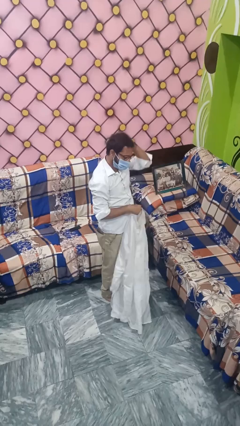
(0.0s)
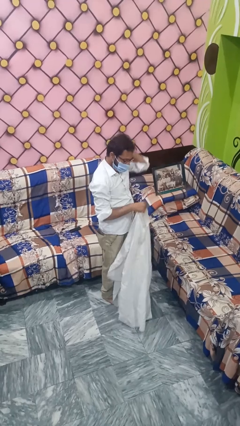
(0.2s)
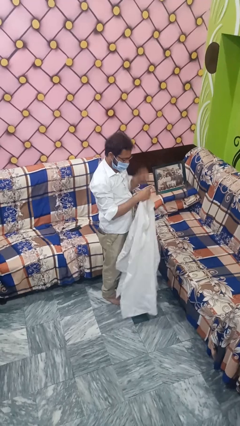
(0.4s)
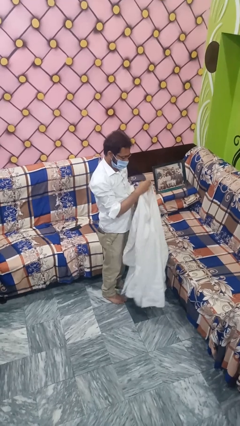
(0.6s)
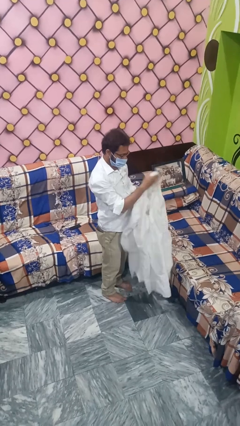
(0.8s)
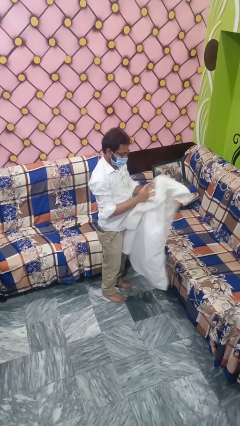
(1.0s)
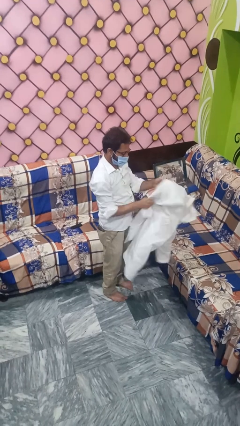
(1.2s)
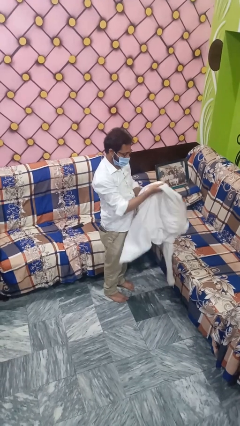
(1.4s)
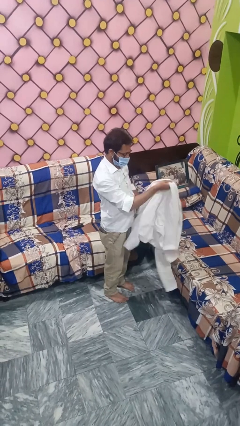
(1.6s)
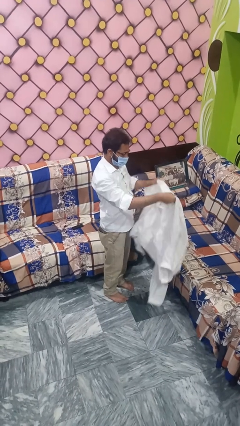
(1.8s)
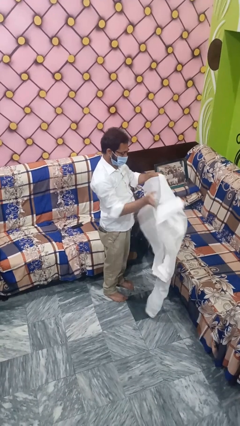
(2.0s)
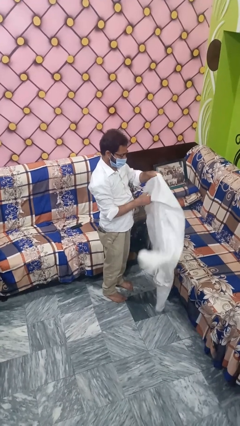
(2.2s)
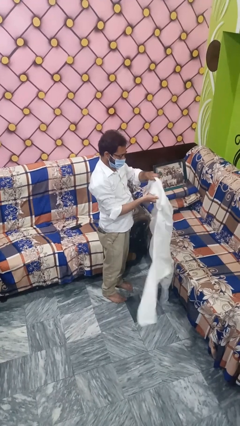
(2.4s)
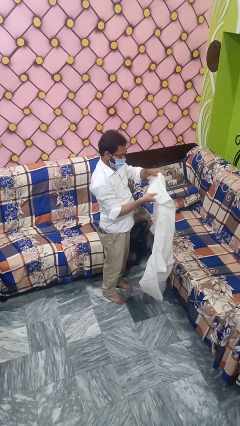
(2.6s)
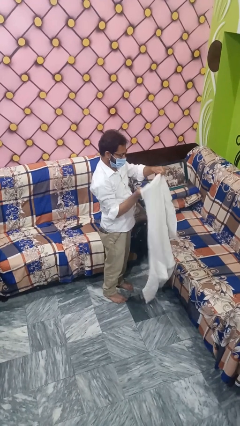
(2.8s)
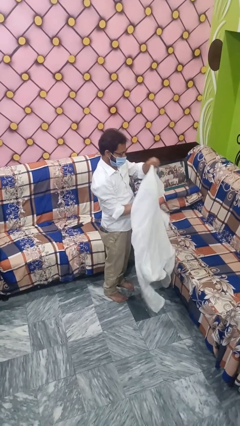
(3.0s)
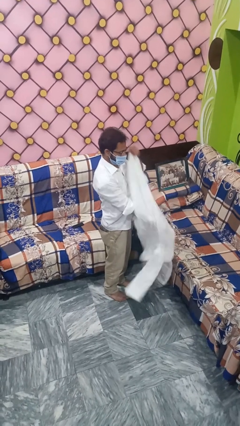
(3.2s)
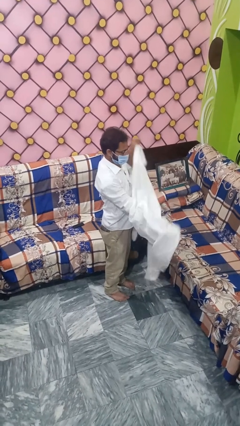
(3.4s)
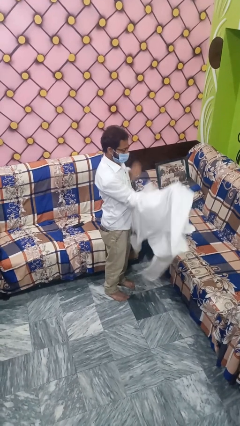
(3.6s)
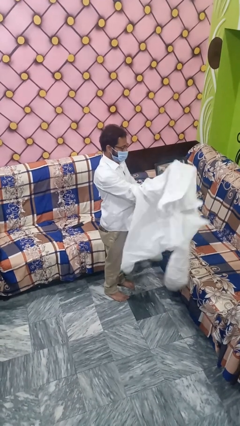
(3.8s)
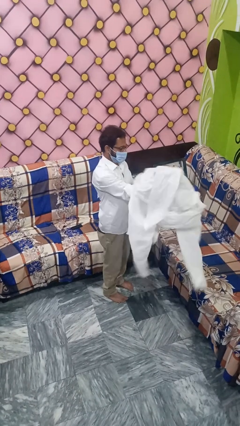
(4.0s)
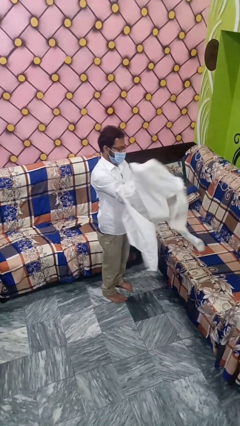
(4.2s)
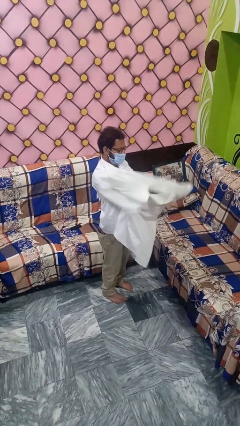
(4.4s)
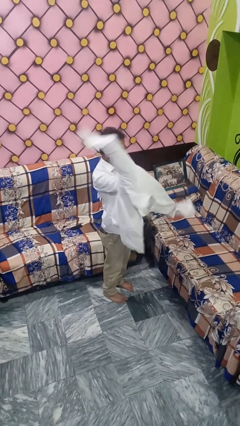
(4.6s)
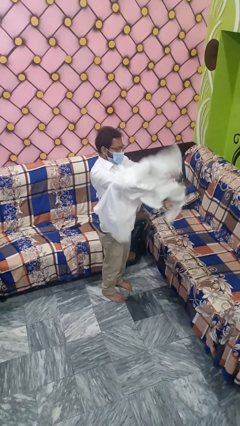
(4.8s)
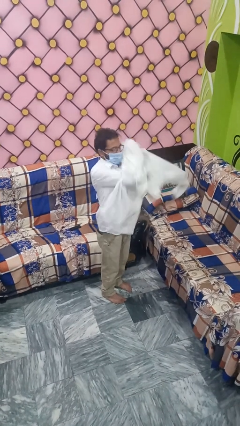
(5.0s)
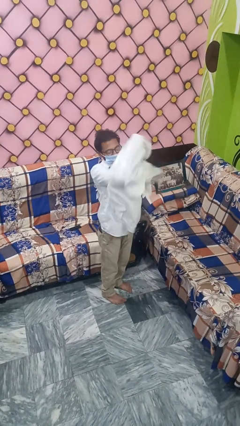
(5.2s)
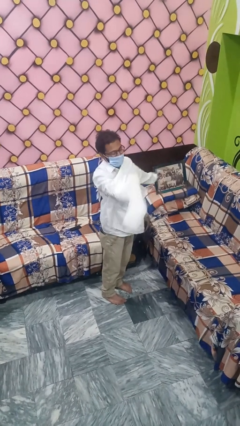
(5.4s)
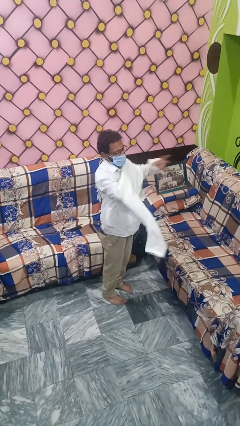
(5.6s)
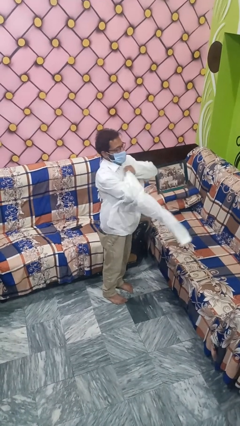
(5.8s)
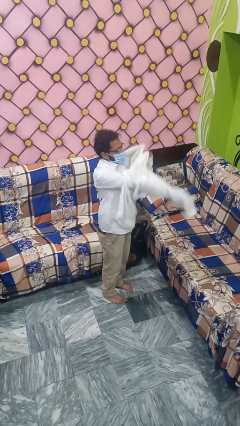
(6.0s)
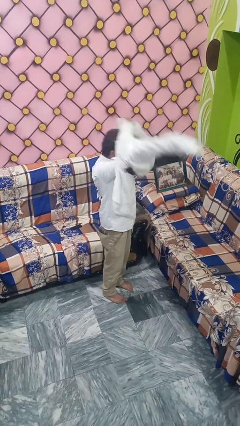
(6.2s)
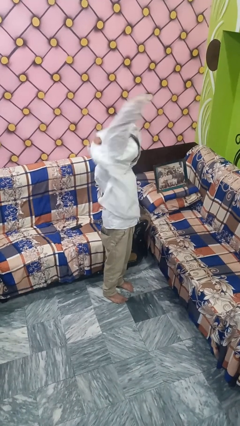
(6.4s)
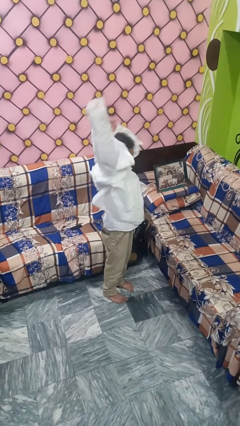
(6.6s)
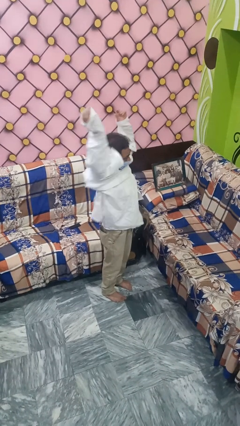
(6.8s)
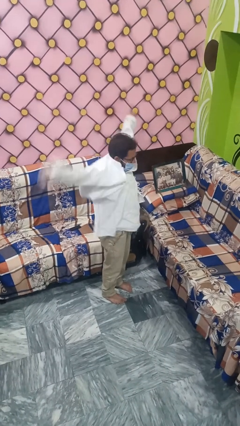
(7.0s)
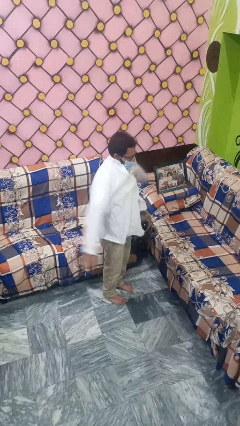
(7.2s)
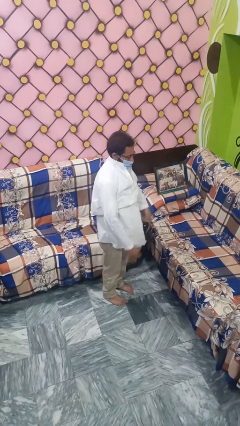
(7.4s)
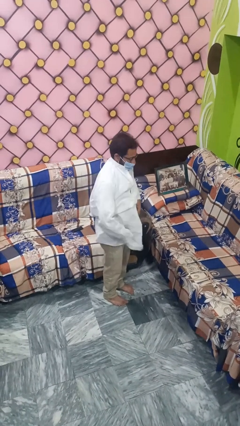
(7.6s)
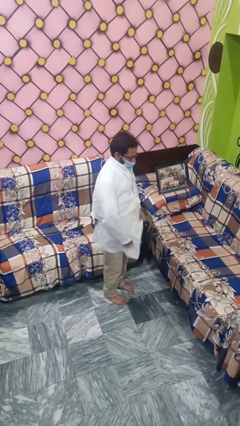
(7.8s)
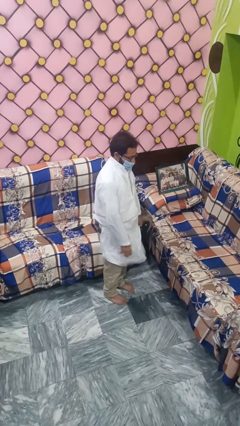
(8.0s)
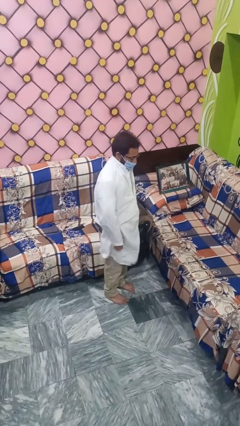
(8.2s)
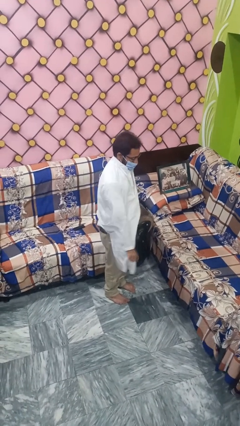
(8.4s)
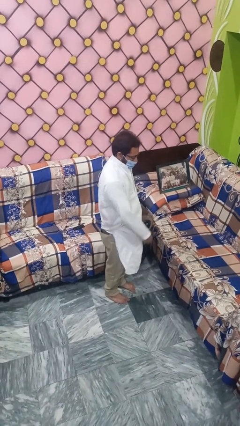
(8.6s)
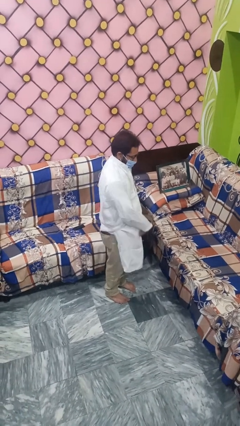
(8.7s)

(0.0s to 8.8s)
person puts on shirt

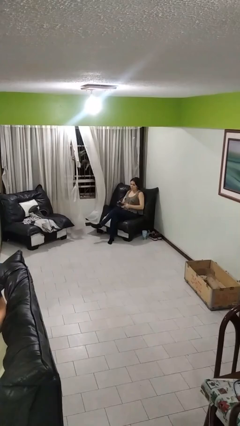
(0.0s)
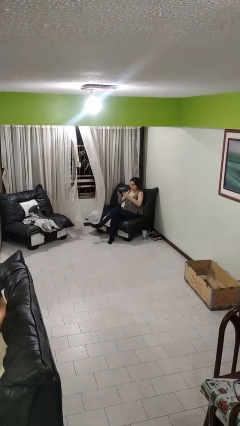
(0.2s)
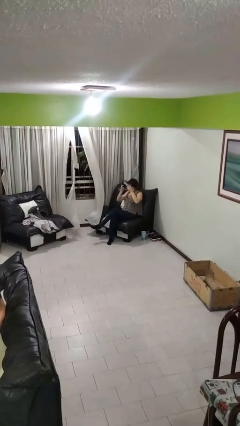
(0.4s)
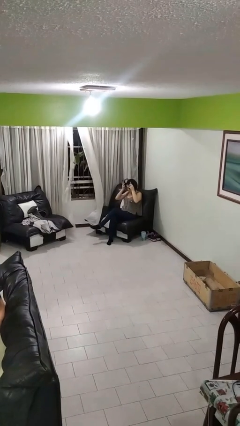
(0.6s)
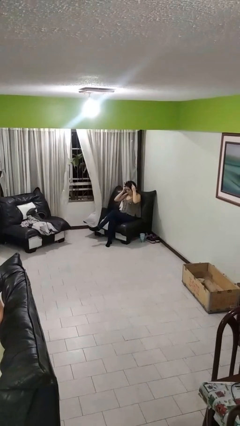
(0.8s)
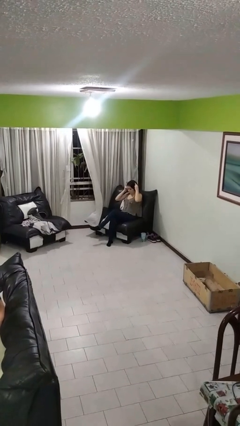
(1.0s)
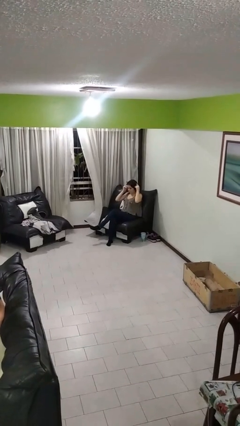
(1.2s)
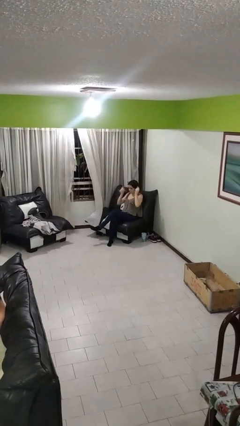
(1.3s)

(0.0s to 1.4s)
person puts on headphones

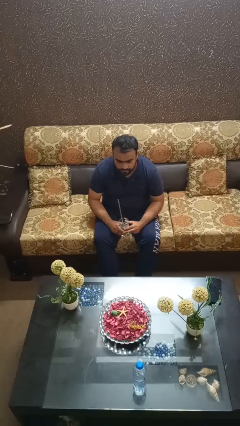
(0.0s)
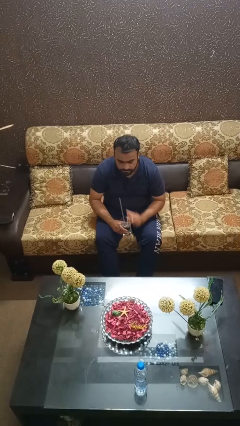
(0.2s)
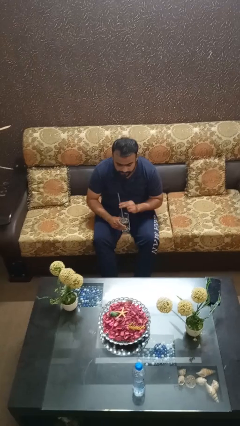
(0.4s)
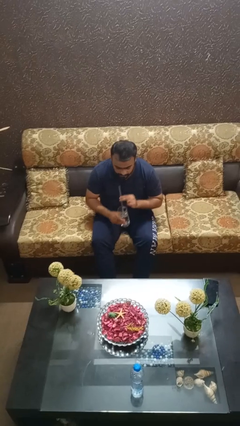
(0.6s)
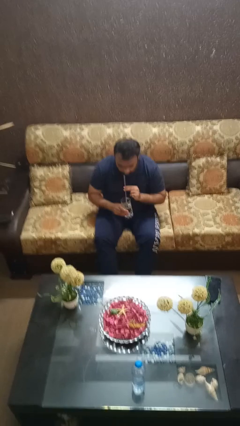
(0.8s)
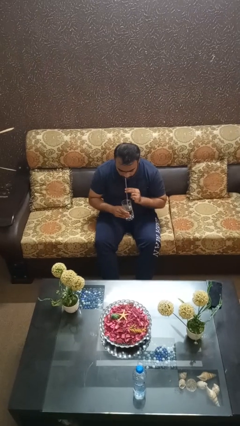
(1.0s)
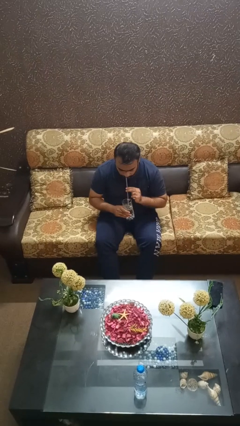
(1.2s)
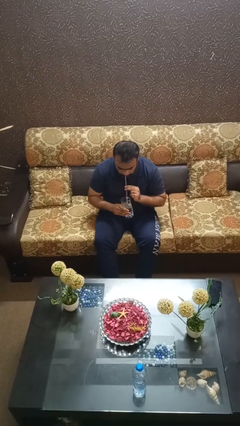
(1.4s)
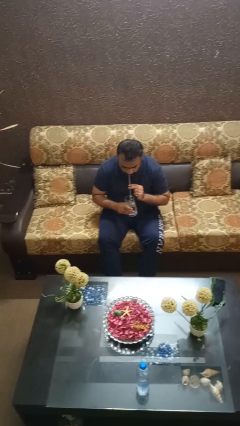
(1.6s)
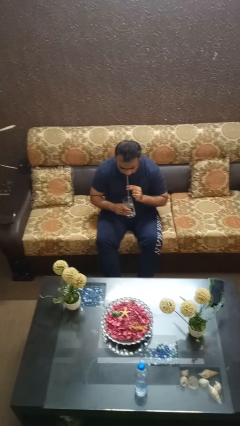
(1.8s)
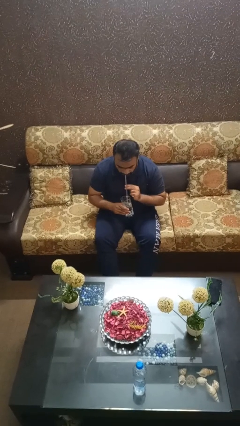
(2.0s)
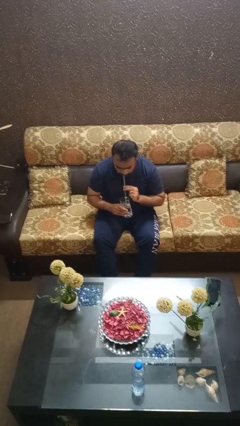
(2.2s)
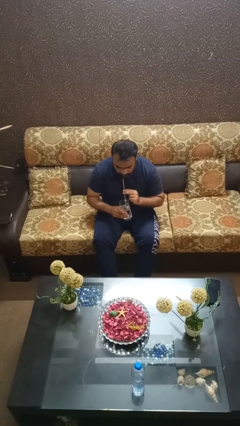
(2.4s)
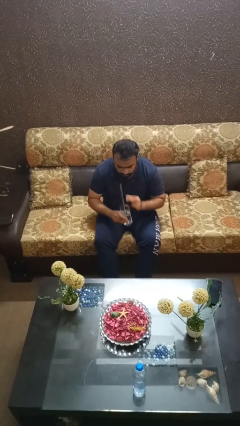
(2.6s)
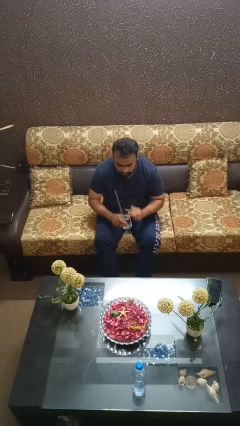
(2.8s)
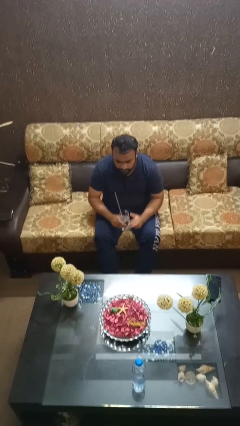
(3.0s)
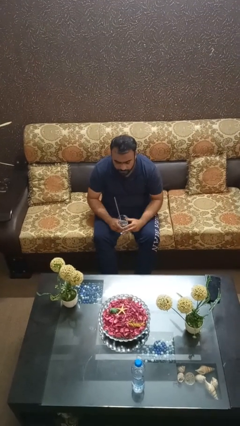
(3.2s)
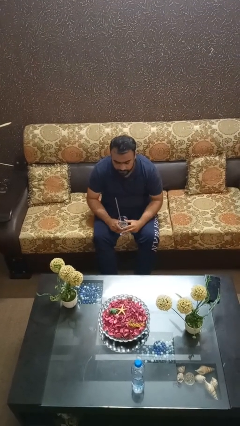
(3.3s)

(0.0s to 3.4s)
person drinks from straw

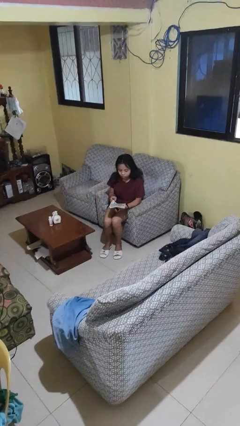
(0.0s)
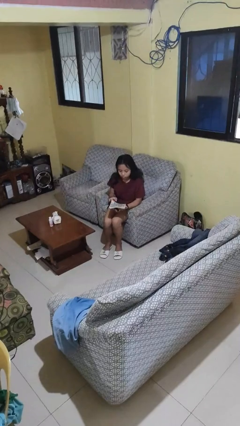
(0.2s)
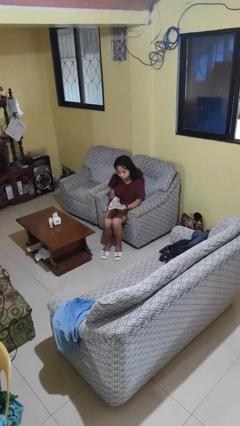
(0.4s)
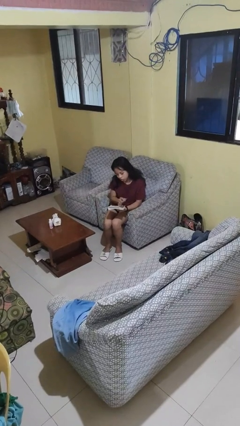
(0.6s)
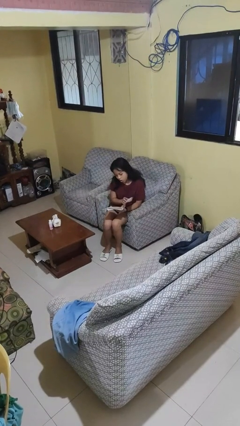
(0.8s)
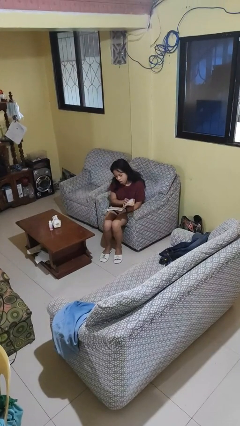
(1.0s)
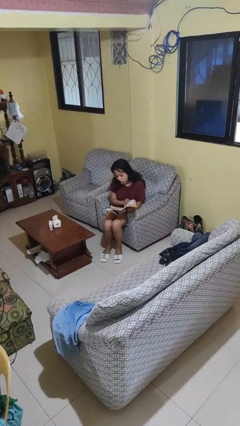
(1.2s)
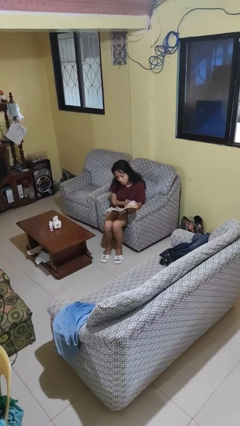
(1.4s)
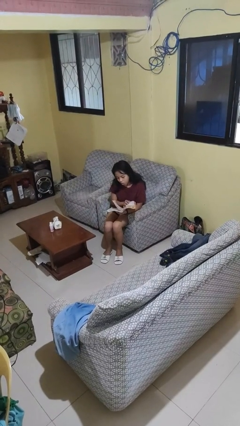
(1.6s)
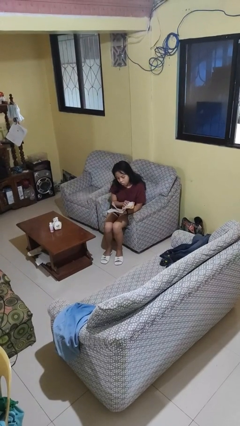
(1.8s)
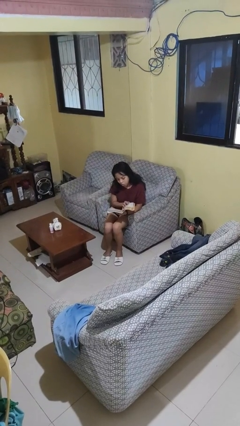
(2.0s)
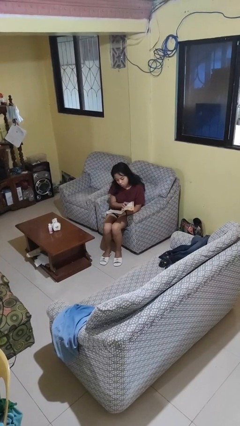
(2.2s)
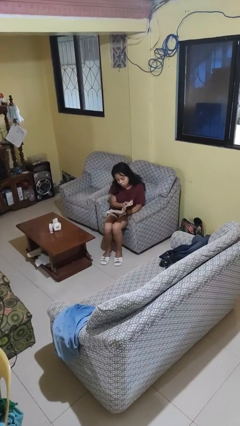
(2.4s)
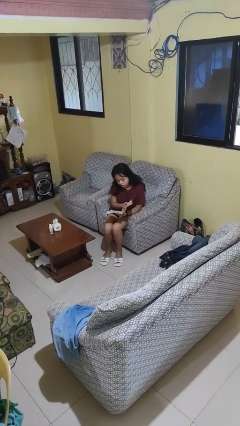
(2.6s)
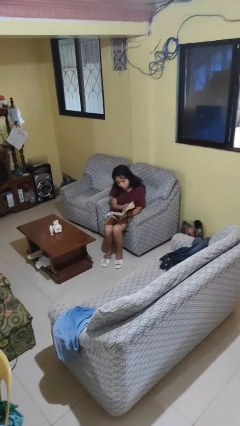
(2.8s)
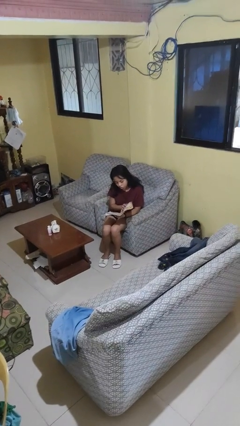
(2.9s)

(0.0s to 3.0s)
person reads magazine

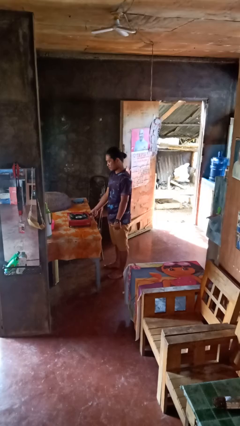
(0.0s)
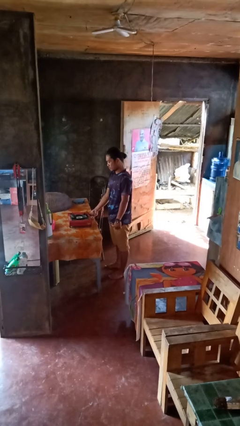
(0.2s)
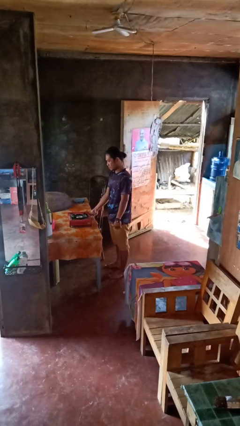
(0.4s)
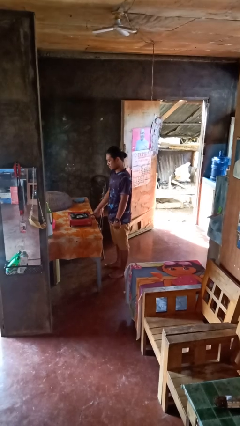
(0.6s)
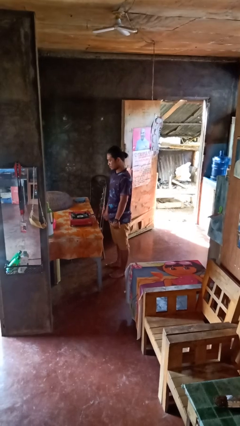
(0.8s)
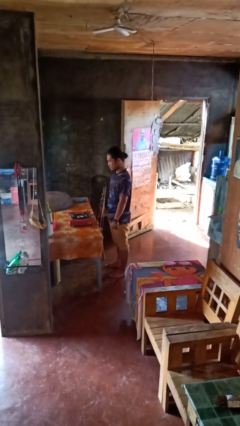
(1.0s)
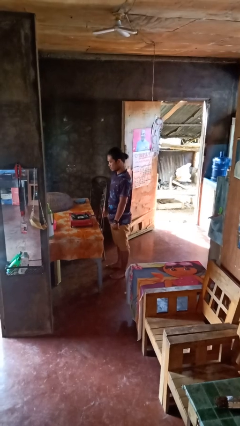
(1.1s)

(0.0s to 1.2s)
person turns off stovetop
